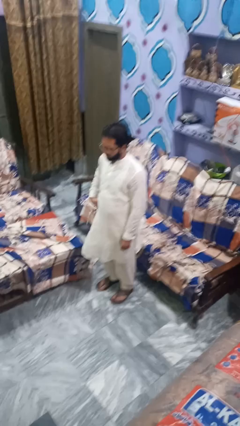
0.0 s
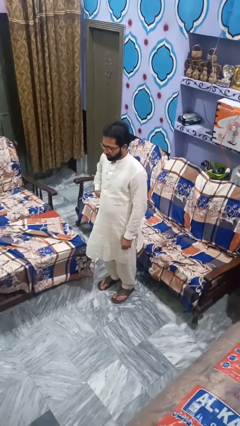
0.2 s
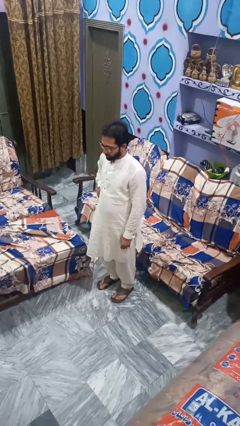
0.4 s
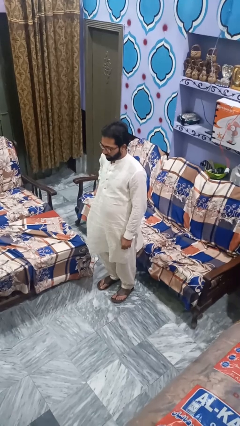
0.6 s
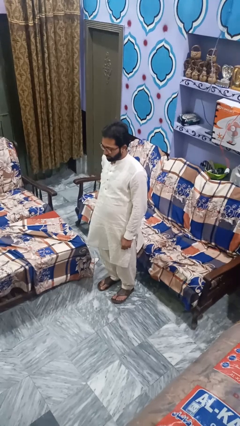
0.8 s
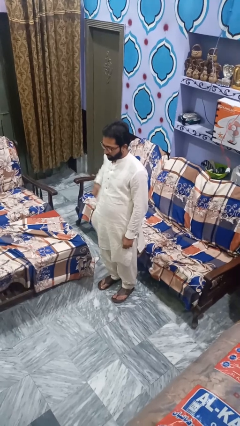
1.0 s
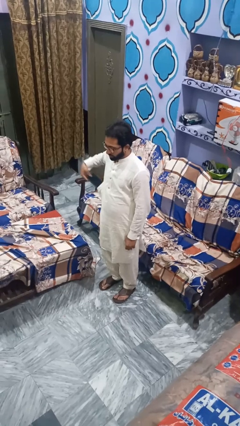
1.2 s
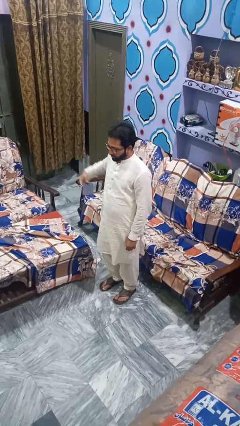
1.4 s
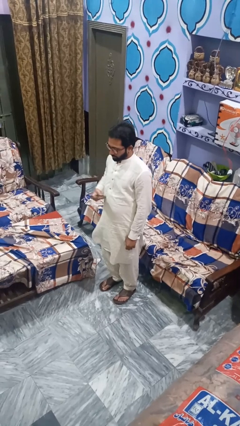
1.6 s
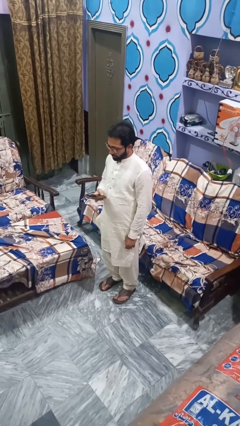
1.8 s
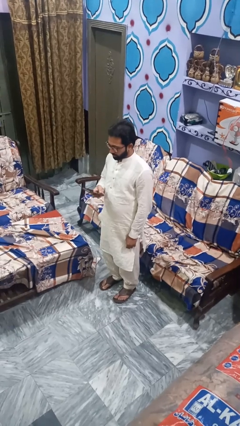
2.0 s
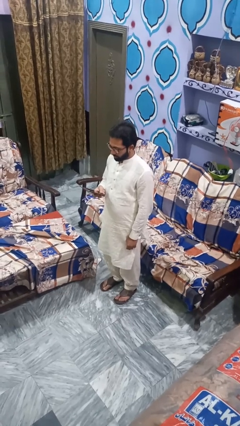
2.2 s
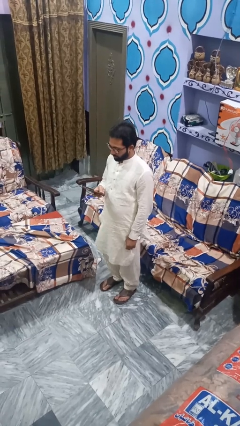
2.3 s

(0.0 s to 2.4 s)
person takes phone from pocket

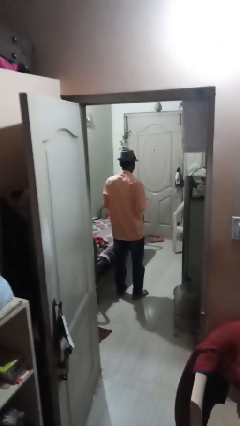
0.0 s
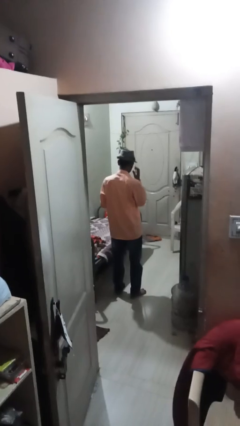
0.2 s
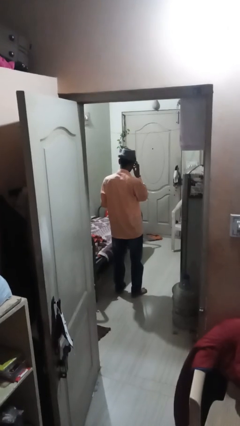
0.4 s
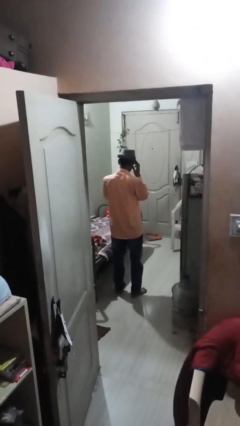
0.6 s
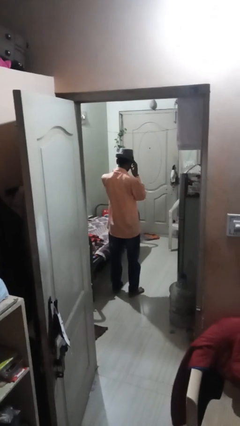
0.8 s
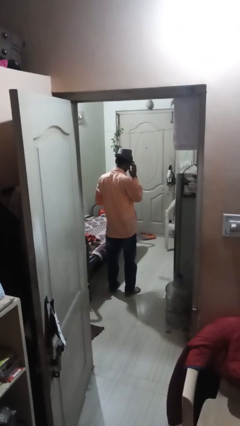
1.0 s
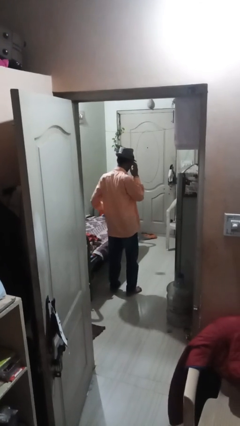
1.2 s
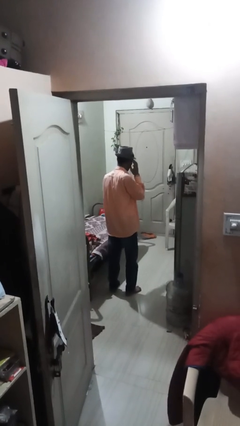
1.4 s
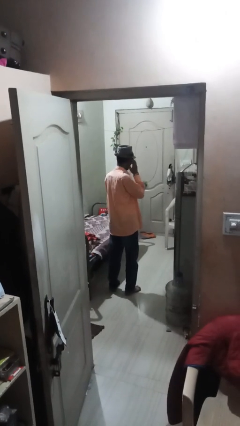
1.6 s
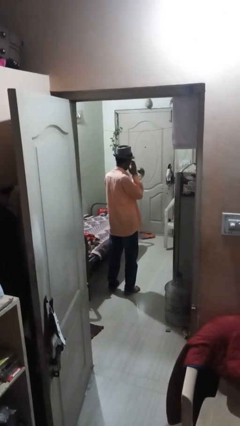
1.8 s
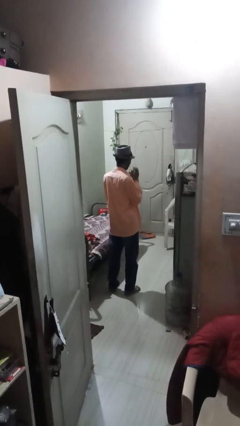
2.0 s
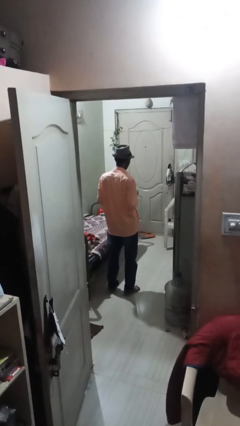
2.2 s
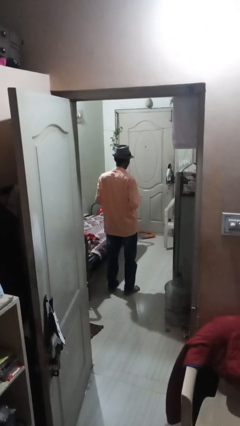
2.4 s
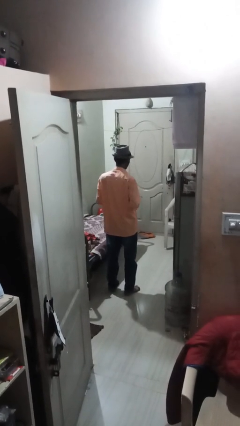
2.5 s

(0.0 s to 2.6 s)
person bounces ball on floor

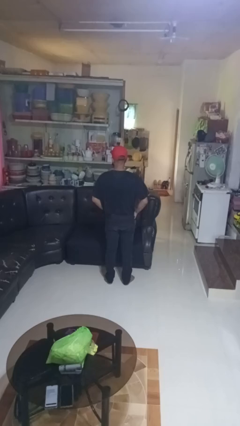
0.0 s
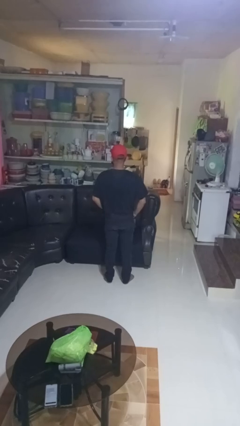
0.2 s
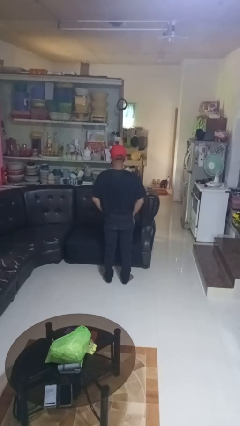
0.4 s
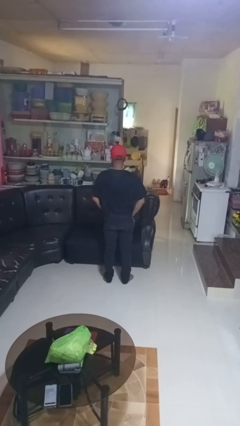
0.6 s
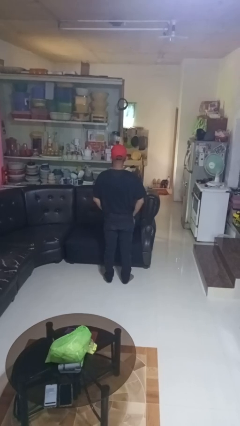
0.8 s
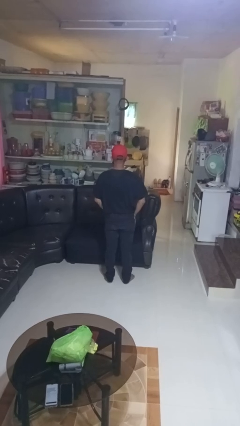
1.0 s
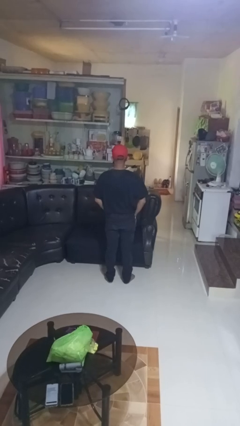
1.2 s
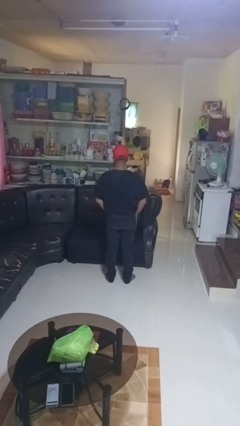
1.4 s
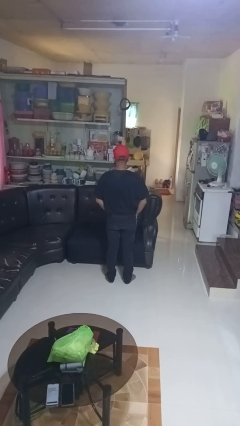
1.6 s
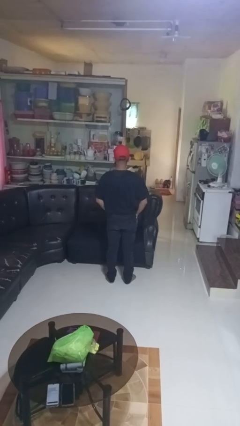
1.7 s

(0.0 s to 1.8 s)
person puts hands in back pockets

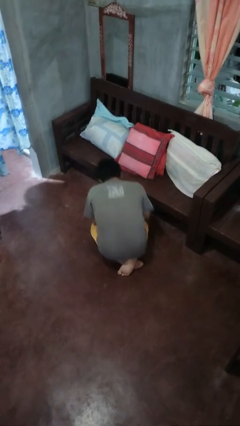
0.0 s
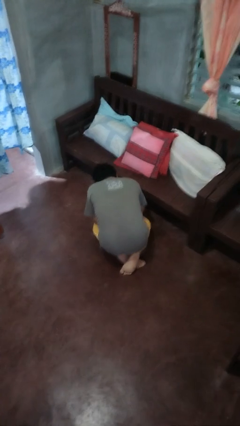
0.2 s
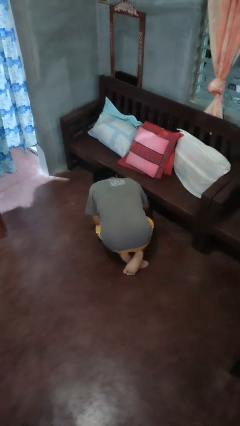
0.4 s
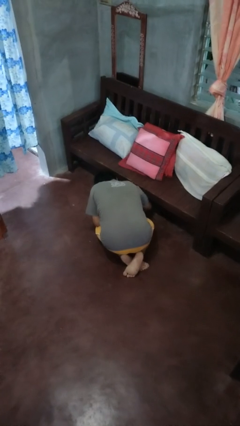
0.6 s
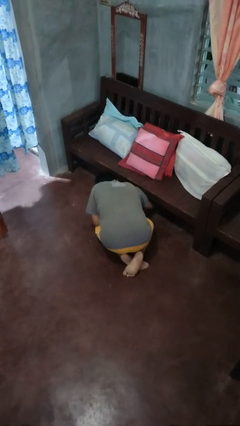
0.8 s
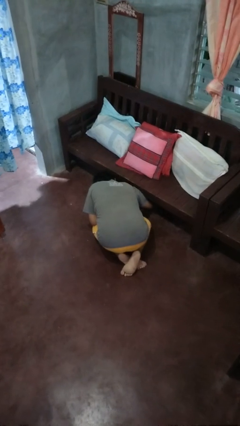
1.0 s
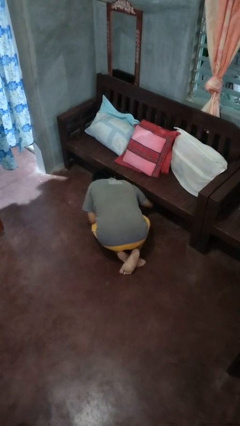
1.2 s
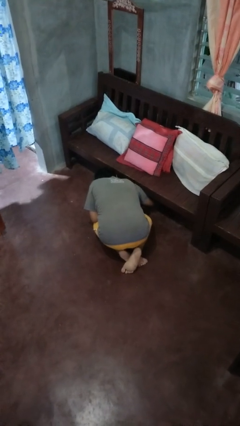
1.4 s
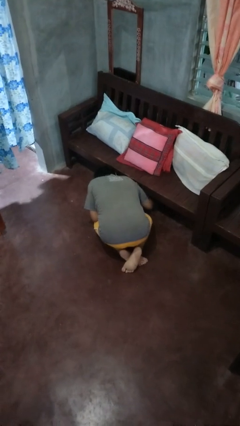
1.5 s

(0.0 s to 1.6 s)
person searches under couch

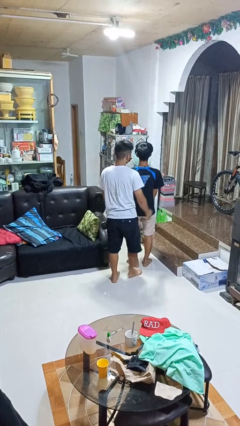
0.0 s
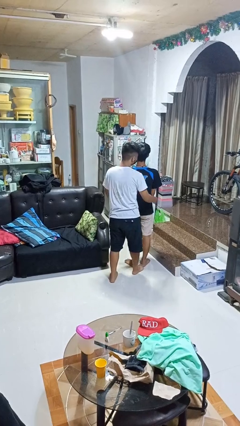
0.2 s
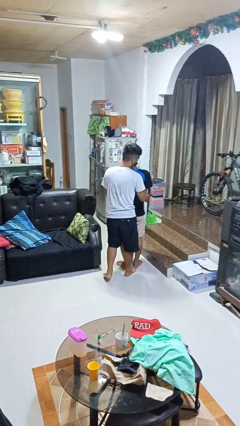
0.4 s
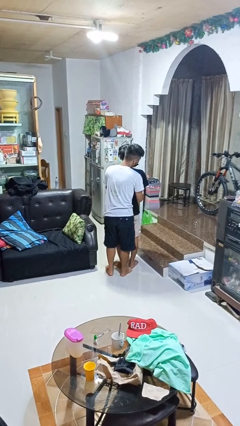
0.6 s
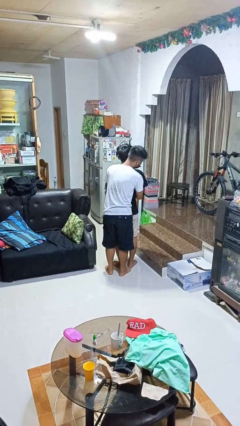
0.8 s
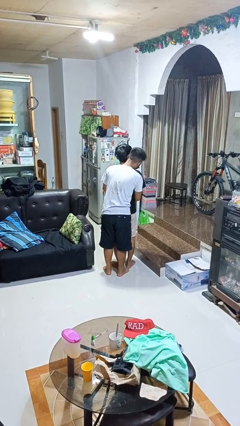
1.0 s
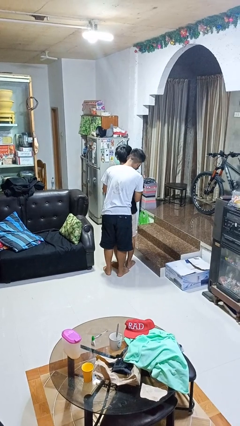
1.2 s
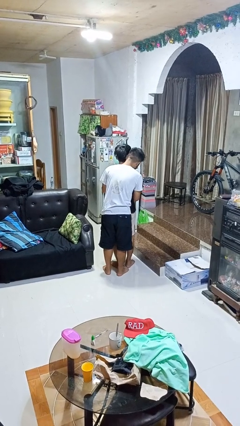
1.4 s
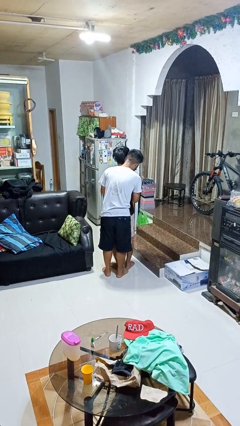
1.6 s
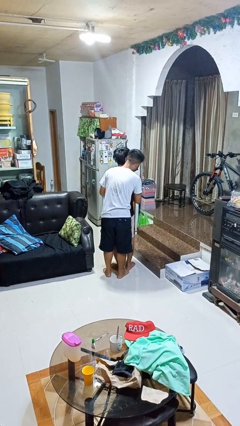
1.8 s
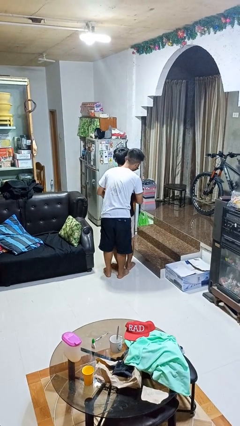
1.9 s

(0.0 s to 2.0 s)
person hugs person from behind

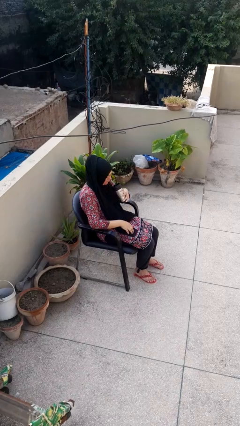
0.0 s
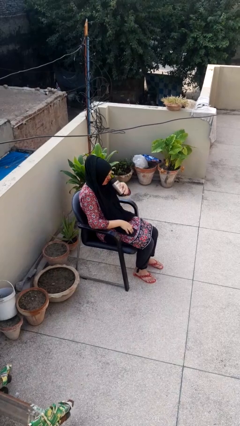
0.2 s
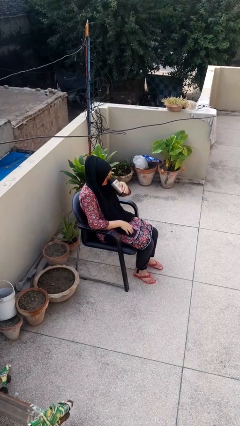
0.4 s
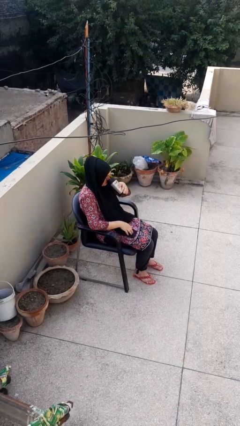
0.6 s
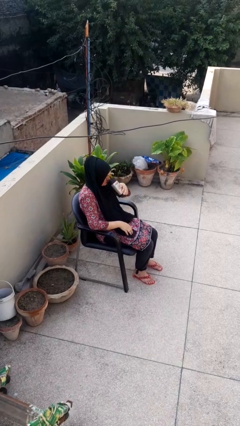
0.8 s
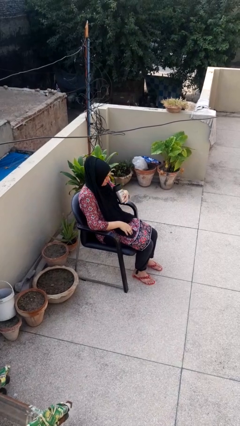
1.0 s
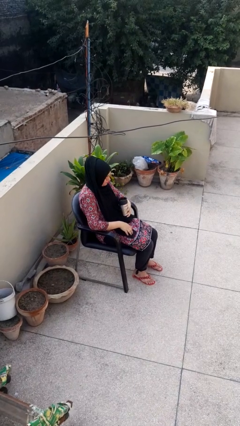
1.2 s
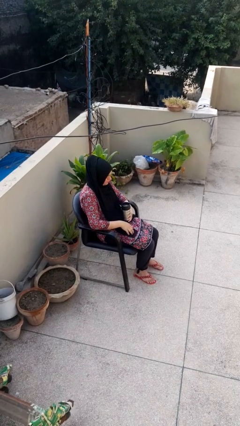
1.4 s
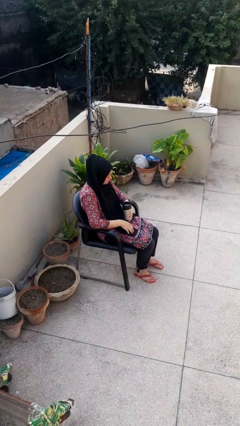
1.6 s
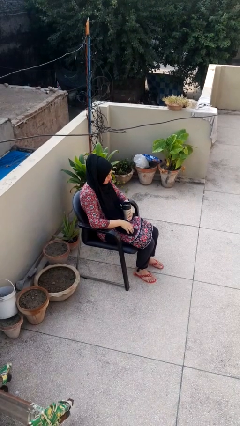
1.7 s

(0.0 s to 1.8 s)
person drinks from beverage can

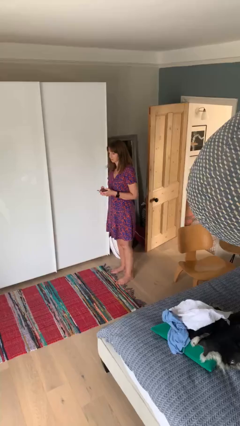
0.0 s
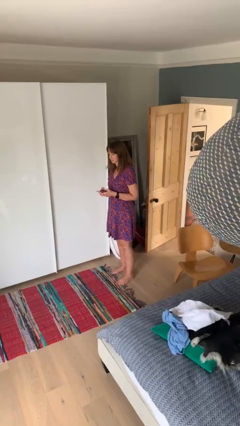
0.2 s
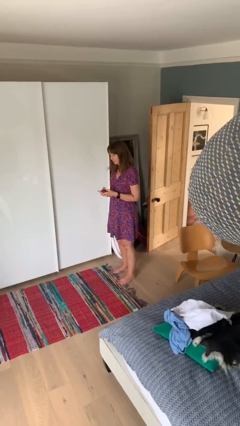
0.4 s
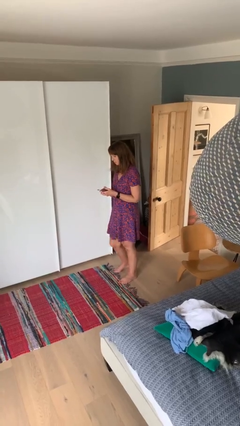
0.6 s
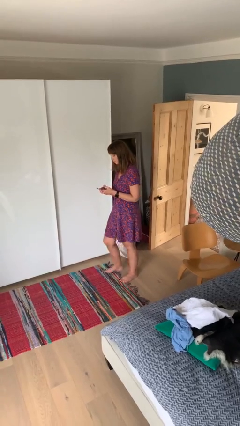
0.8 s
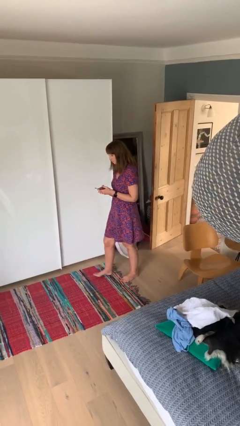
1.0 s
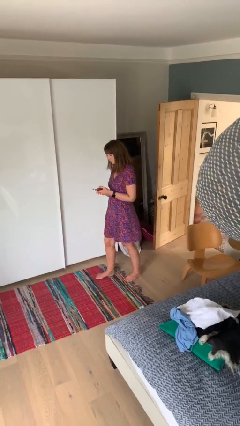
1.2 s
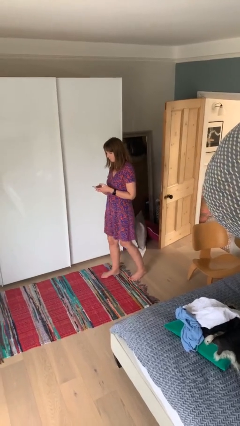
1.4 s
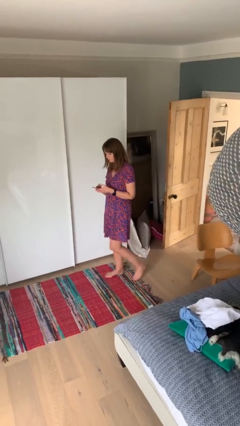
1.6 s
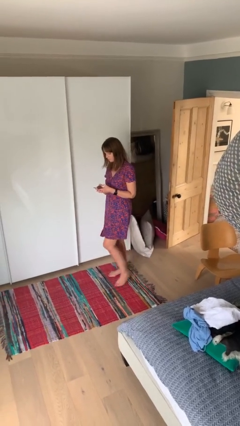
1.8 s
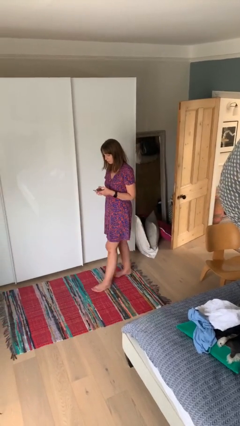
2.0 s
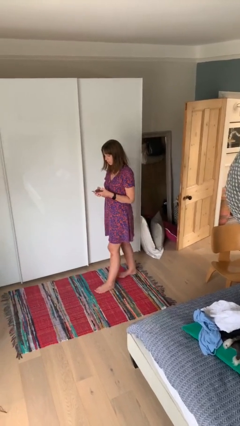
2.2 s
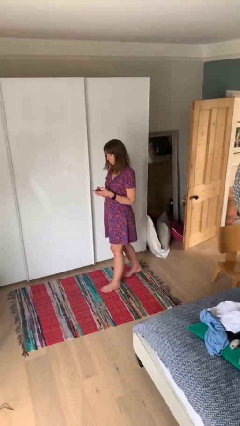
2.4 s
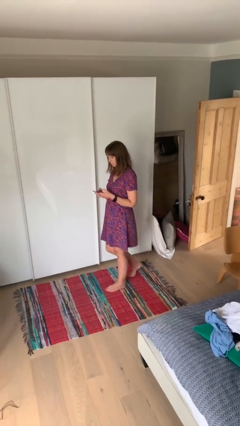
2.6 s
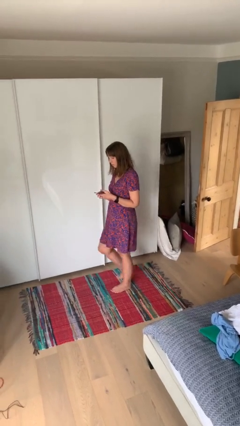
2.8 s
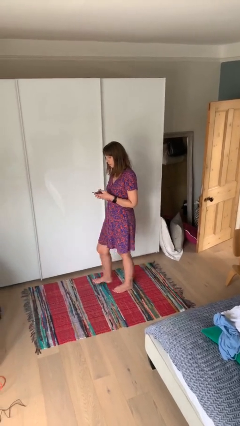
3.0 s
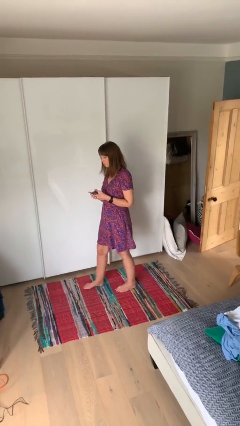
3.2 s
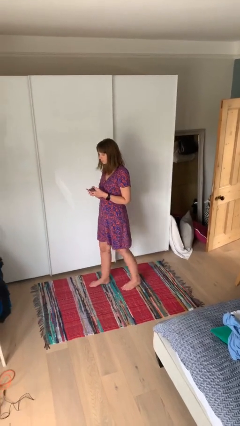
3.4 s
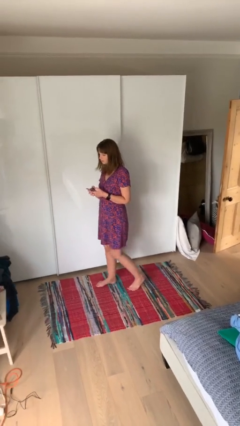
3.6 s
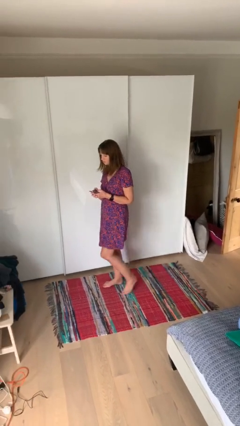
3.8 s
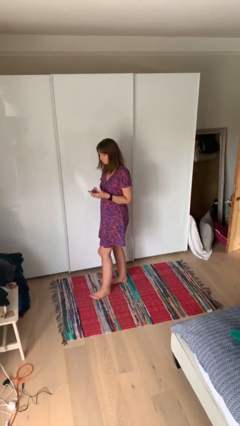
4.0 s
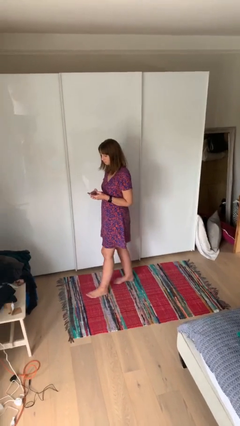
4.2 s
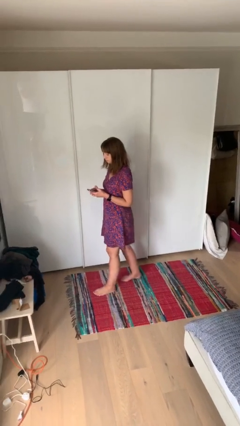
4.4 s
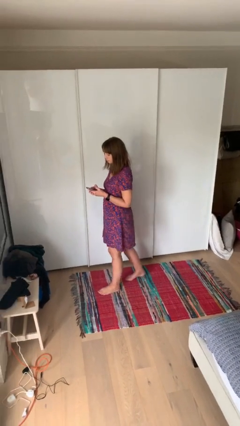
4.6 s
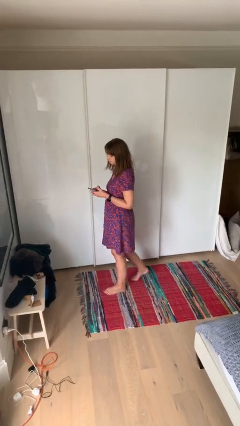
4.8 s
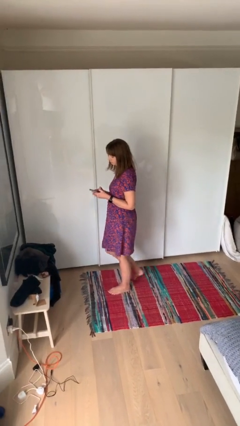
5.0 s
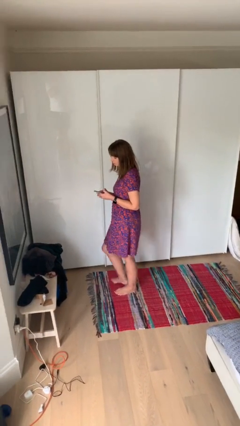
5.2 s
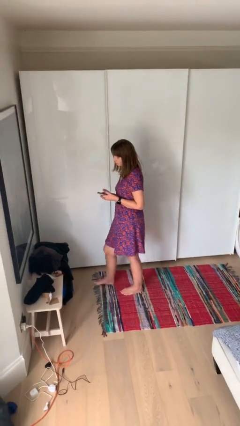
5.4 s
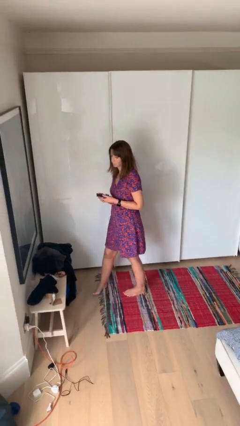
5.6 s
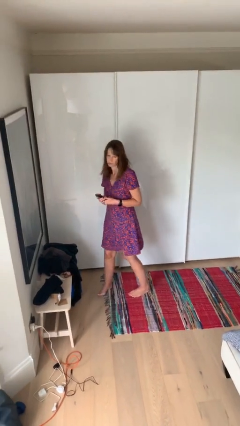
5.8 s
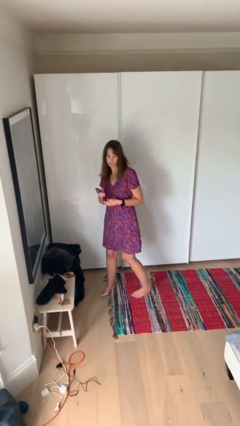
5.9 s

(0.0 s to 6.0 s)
person texts on phone
